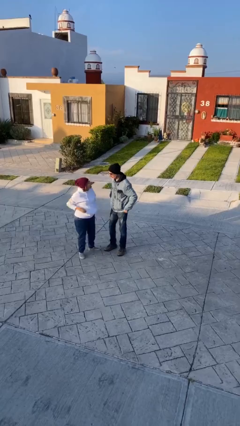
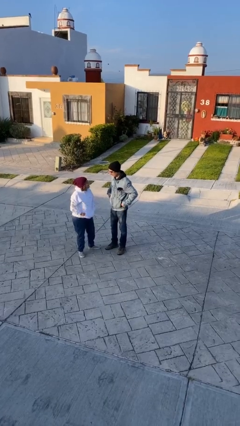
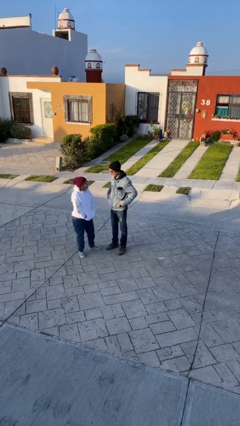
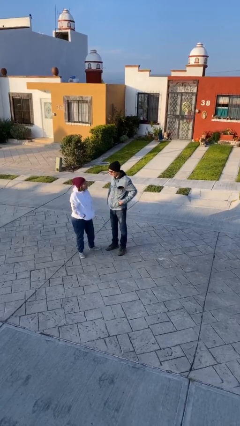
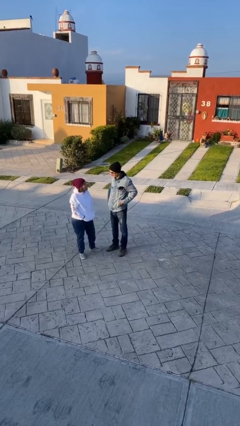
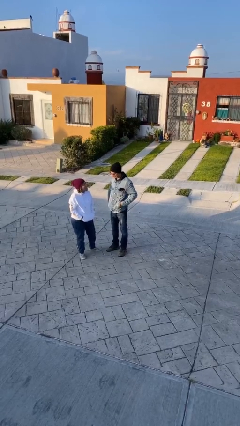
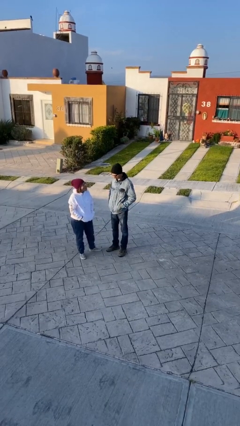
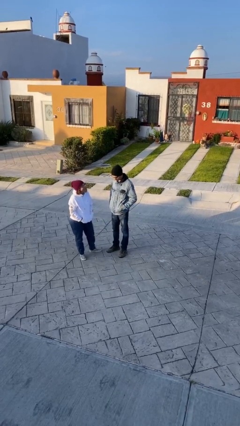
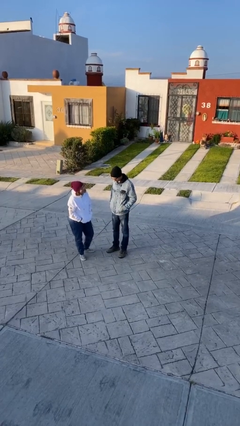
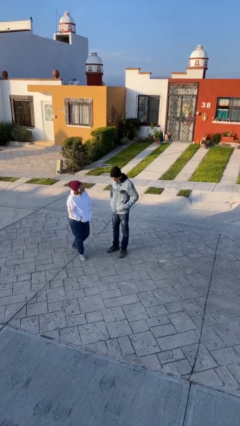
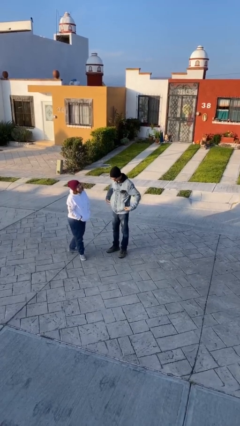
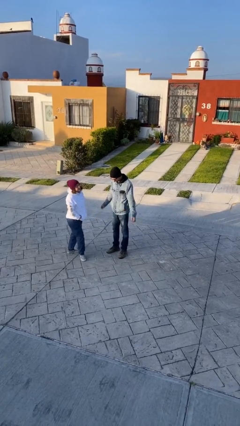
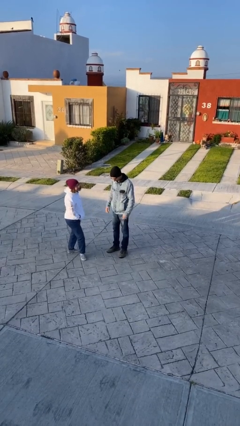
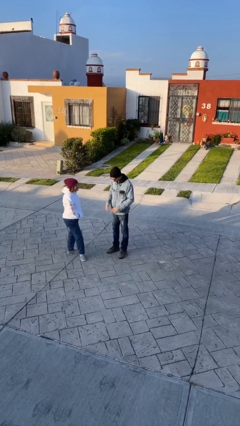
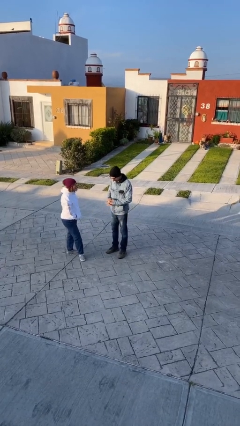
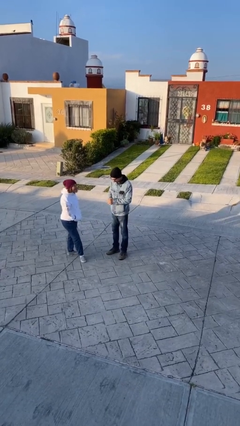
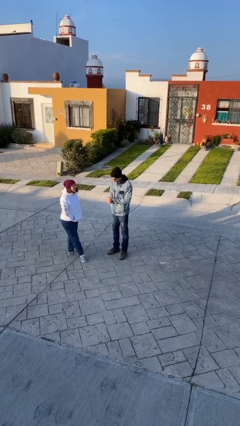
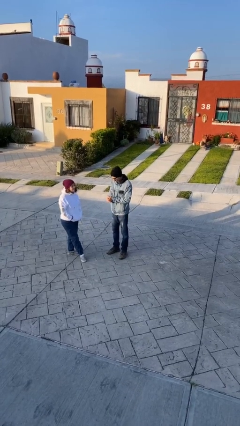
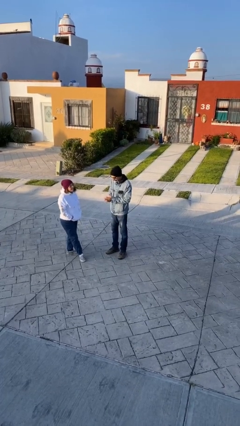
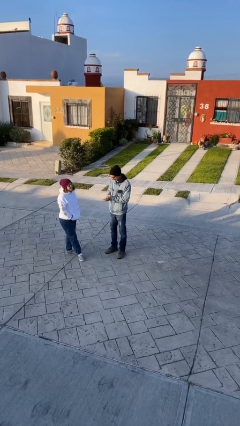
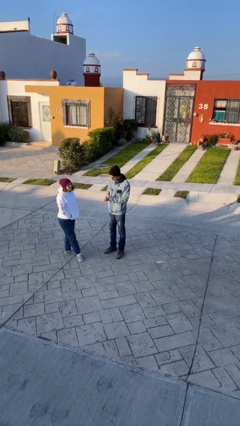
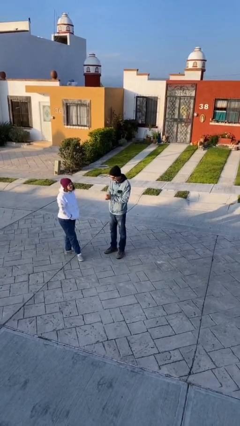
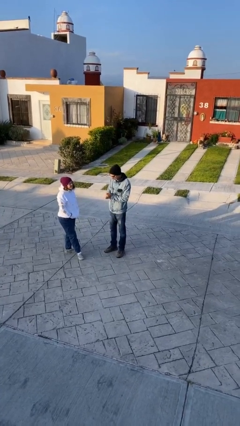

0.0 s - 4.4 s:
person talks to person

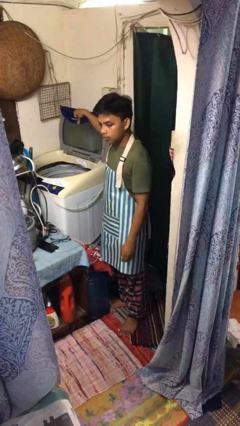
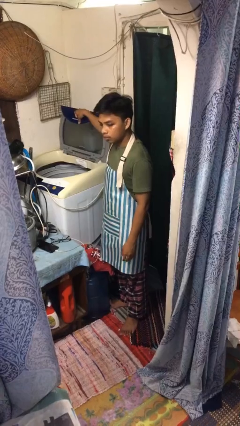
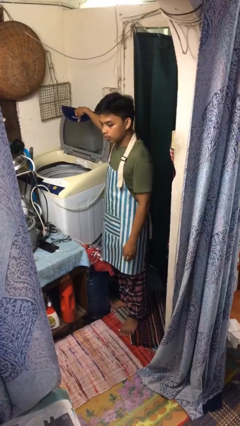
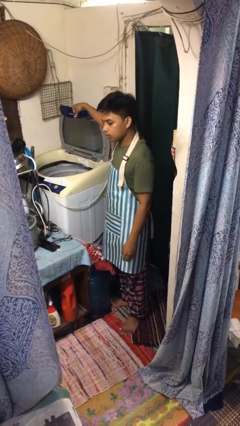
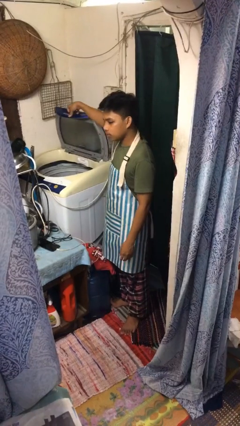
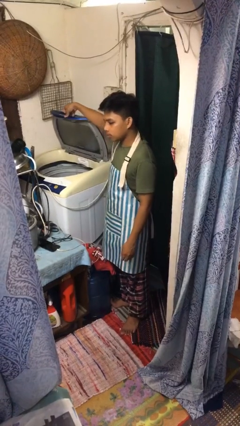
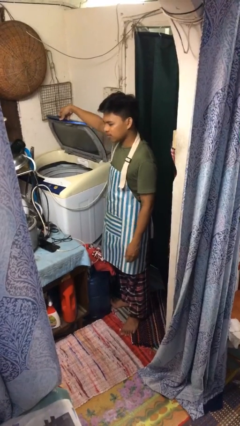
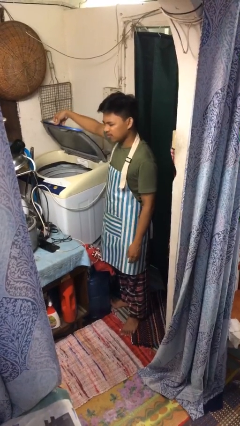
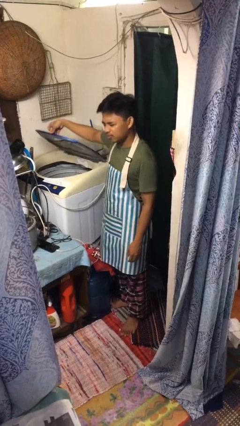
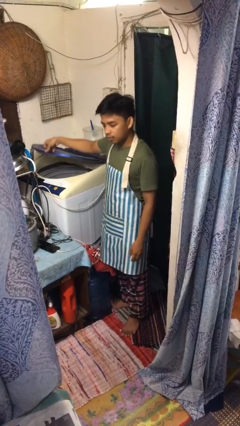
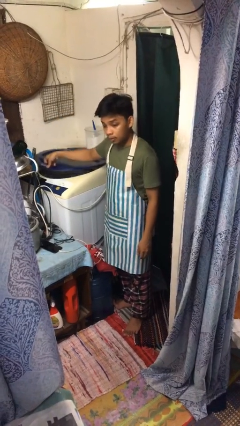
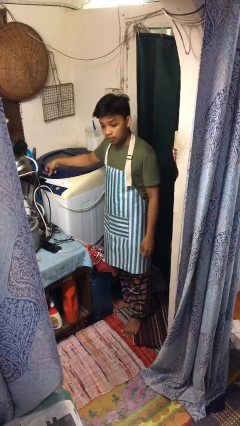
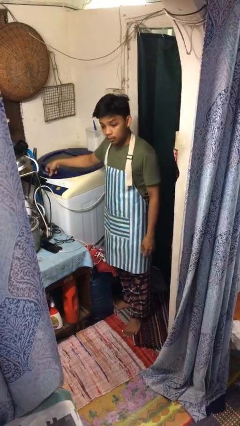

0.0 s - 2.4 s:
person closes clothes washer

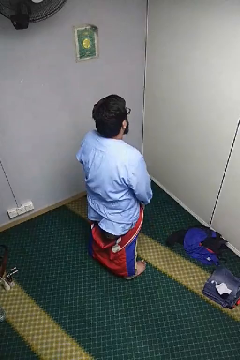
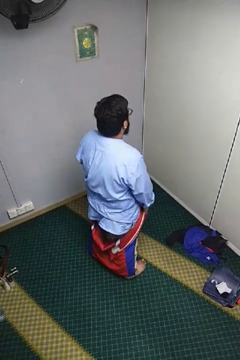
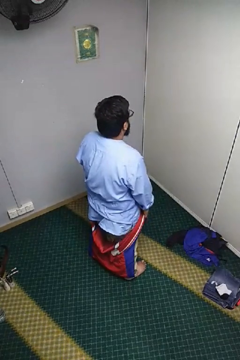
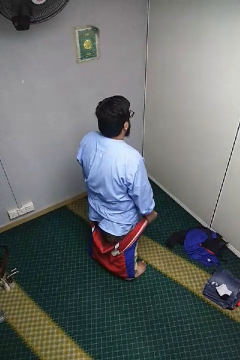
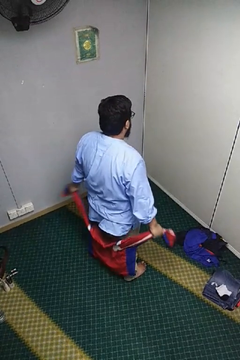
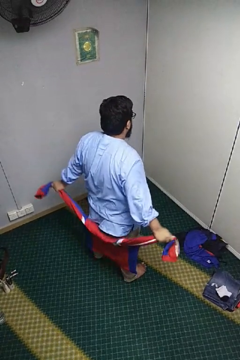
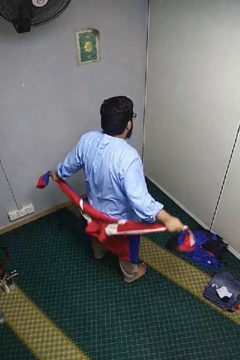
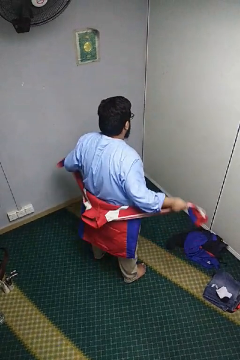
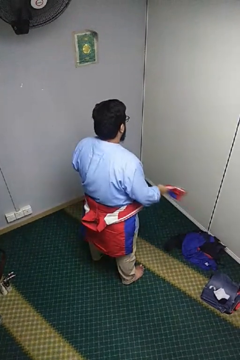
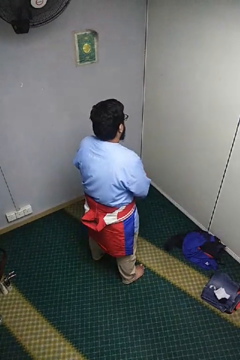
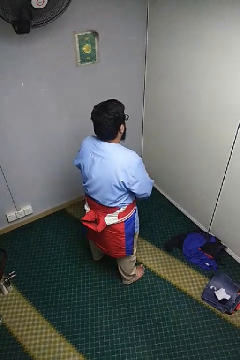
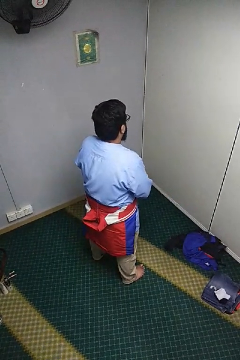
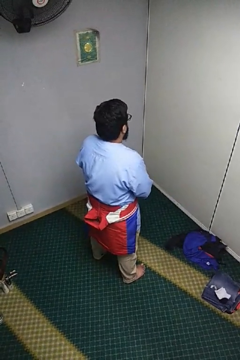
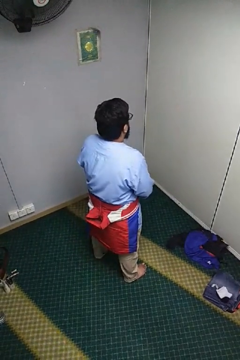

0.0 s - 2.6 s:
person ties jacket around waist

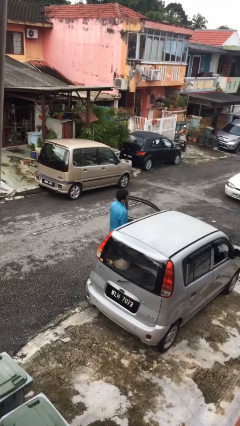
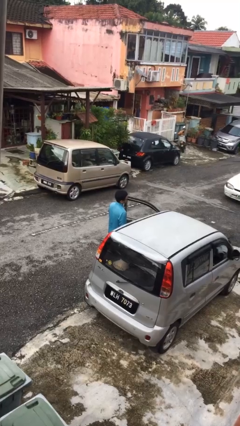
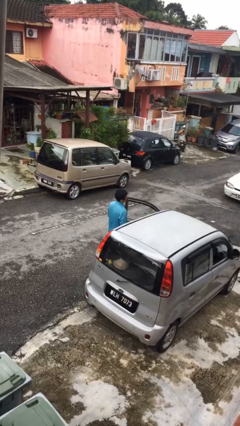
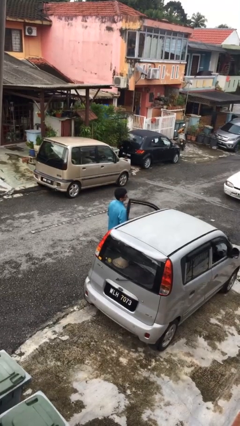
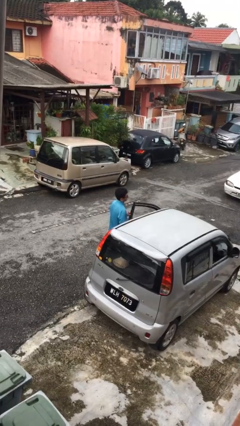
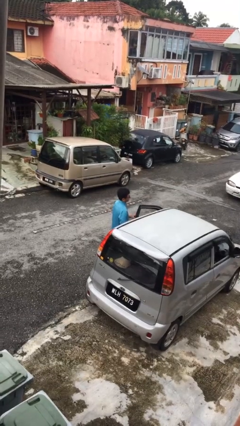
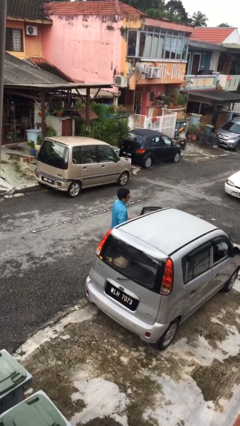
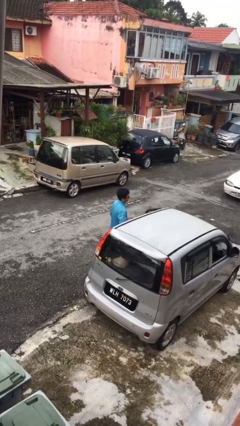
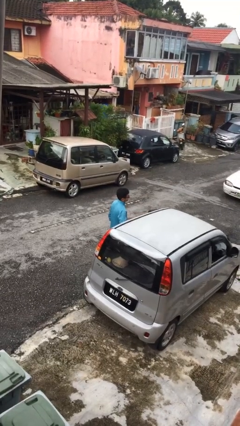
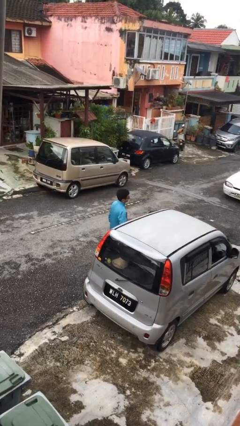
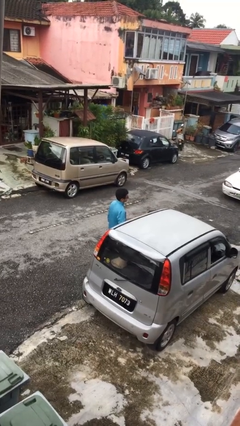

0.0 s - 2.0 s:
person closes car door

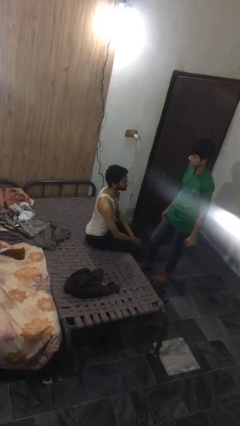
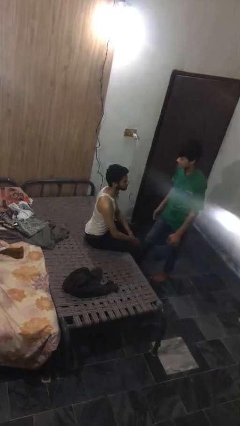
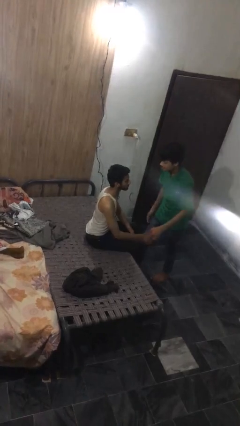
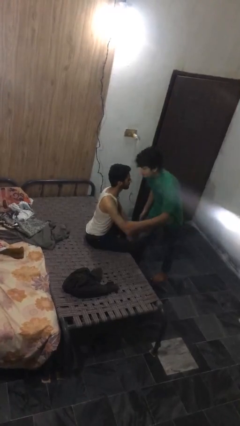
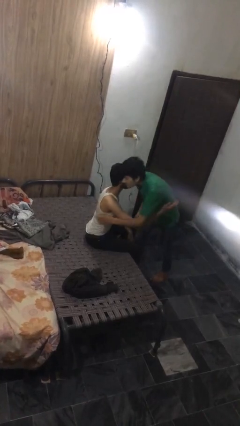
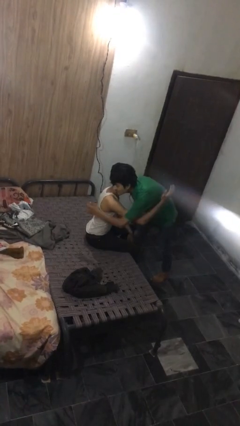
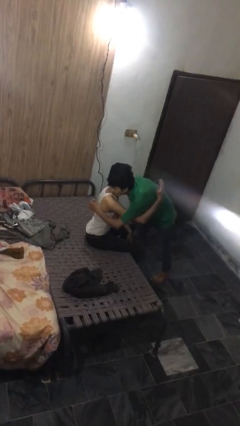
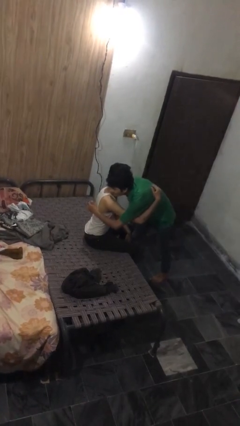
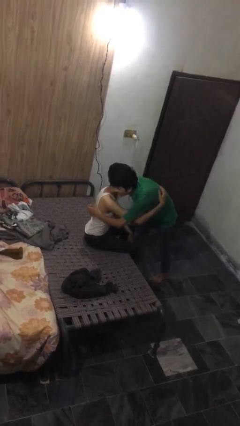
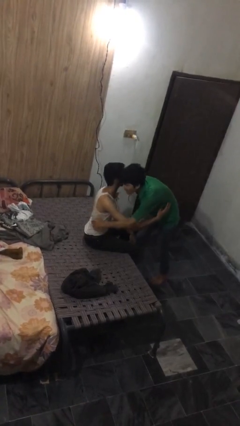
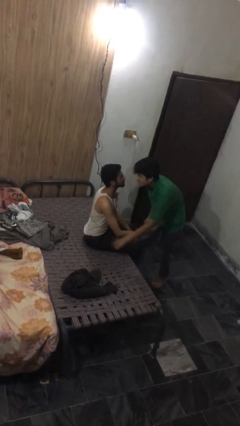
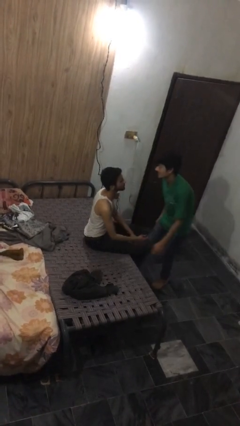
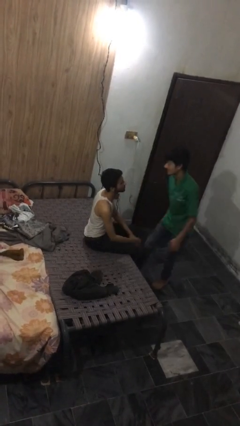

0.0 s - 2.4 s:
person embraces person

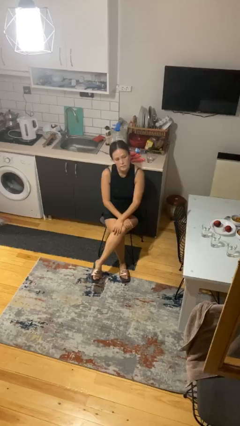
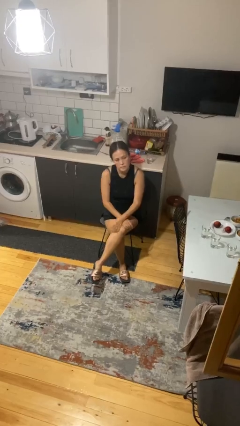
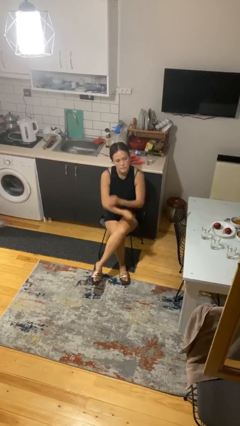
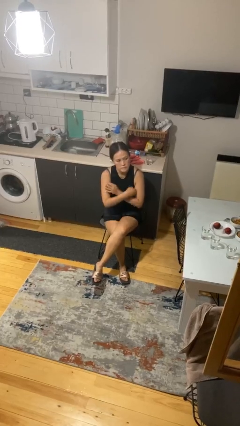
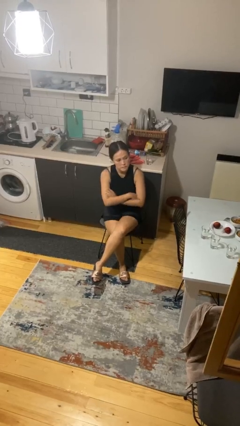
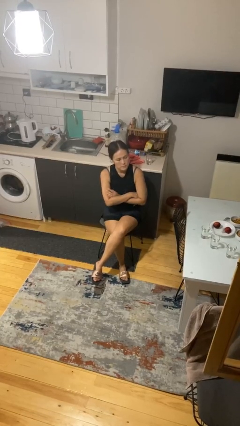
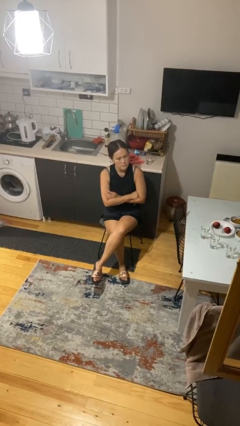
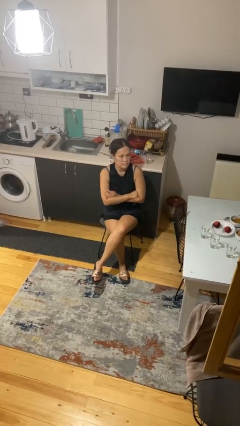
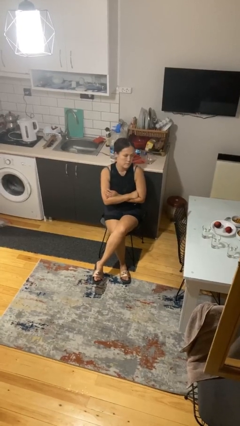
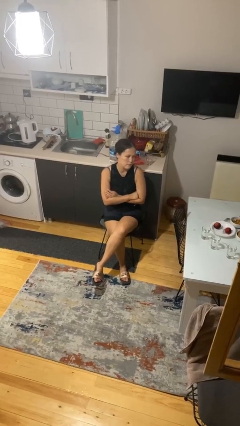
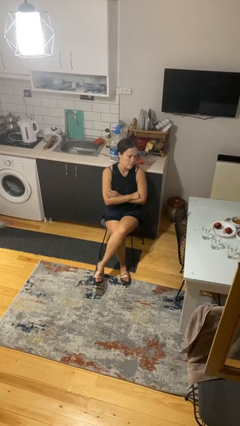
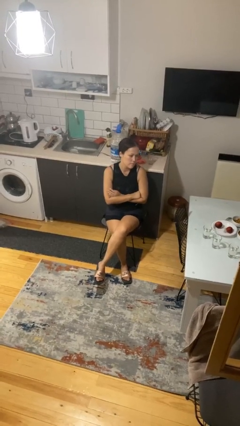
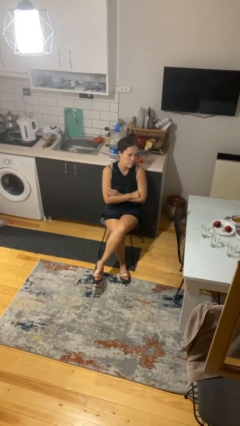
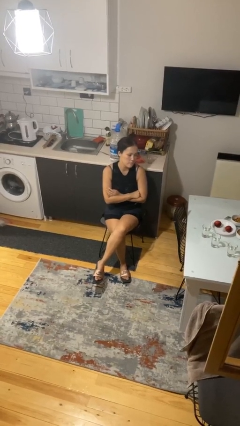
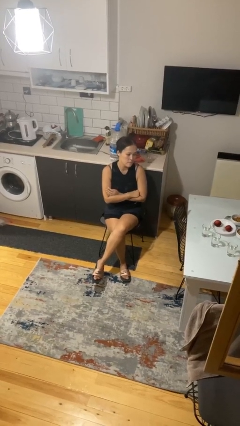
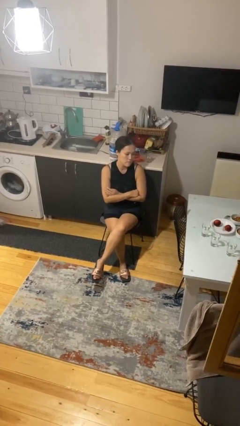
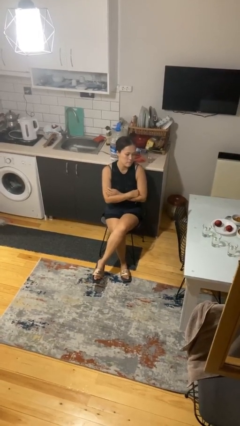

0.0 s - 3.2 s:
person crosses arms

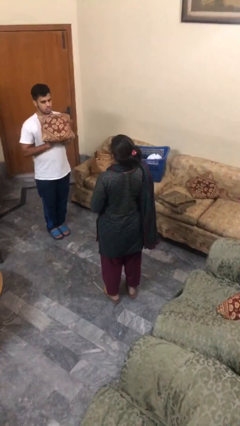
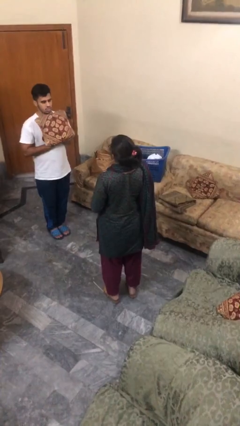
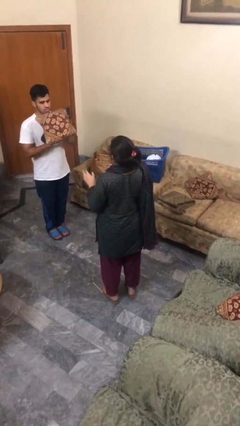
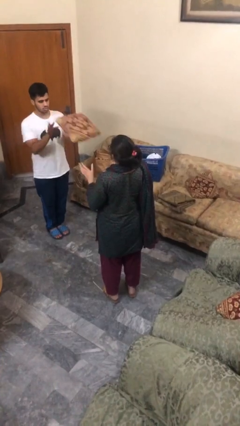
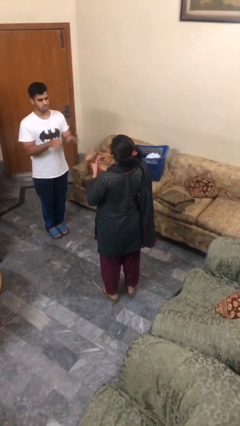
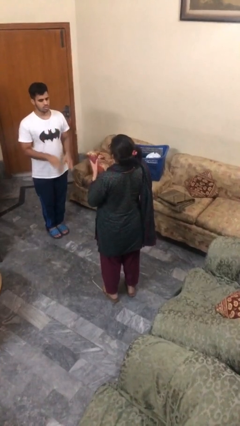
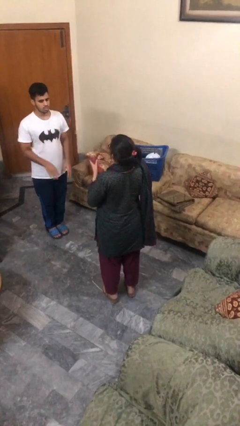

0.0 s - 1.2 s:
person catches object from person
